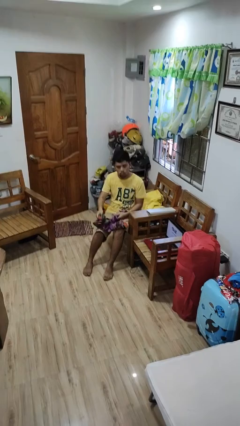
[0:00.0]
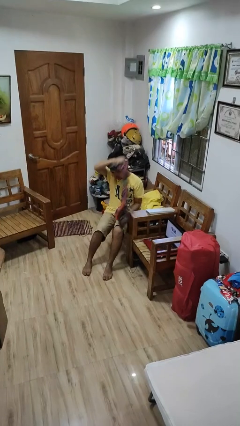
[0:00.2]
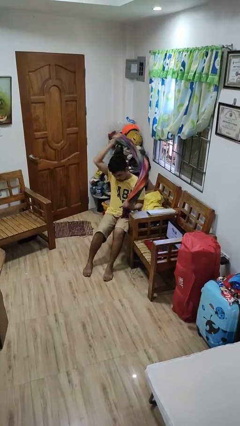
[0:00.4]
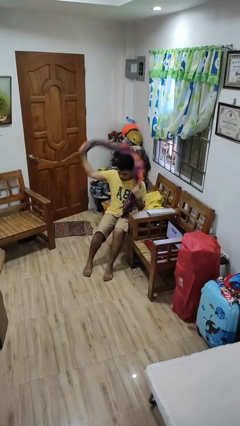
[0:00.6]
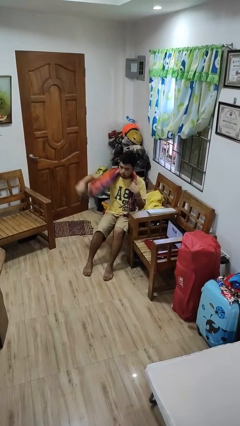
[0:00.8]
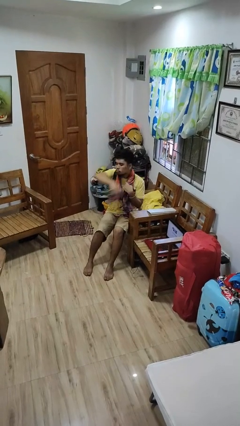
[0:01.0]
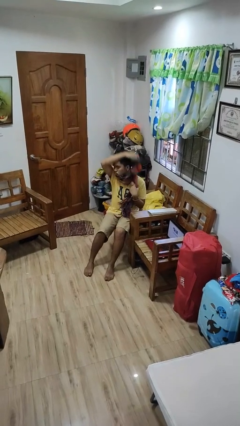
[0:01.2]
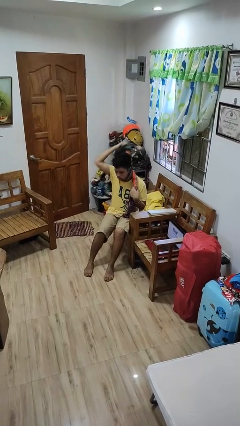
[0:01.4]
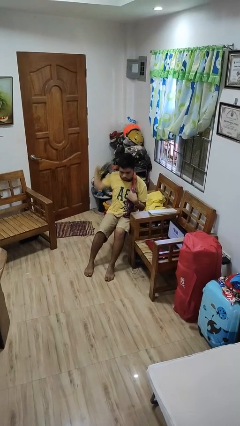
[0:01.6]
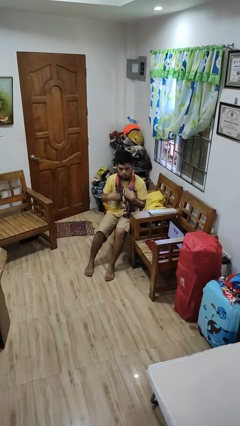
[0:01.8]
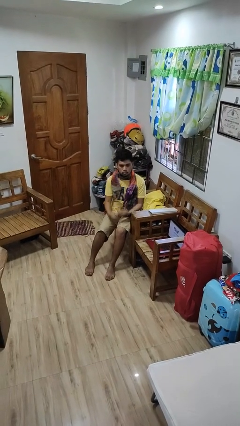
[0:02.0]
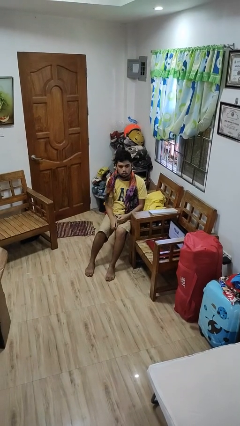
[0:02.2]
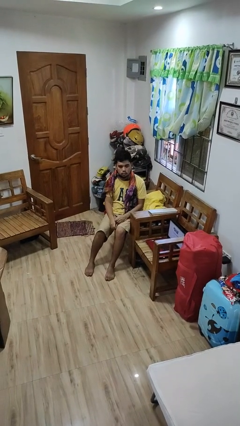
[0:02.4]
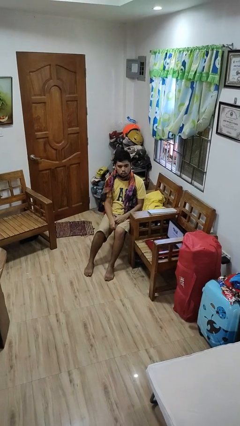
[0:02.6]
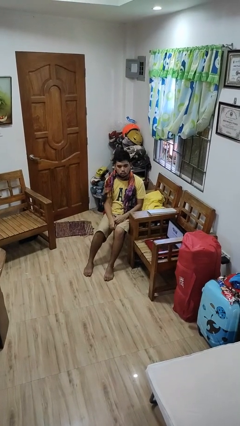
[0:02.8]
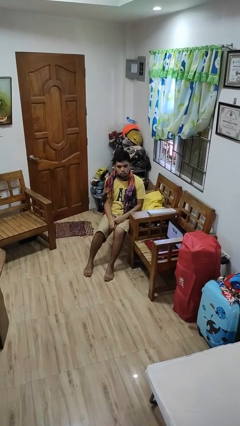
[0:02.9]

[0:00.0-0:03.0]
person puts on scarf

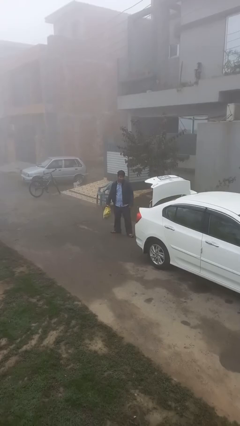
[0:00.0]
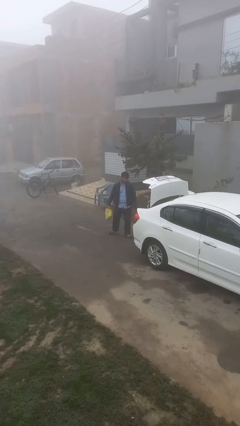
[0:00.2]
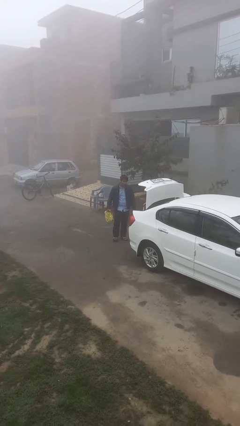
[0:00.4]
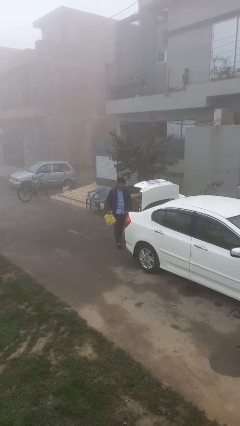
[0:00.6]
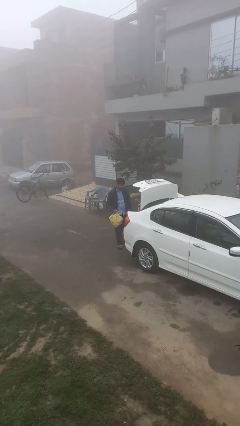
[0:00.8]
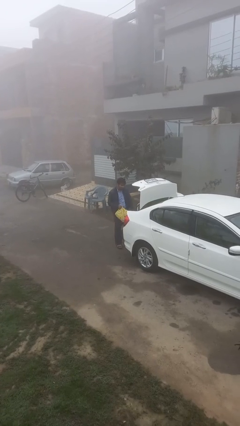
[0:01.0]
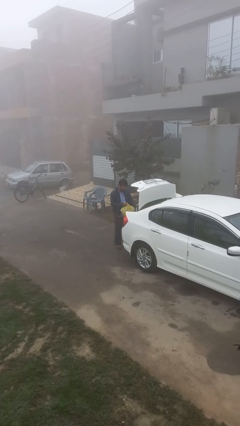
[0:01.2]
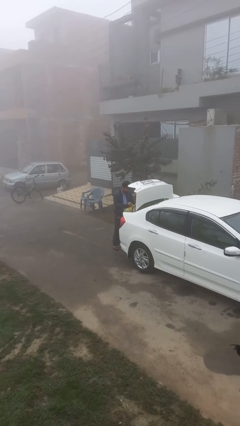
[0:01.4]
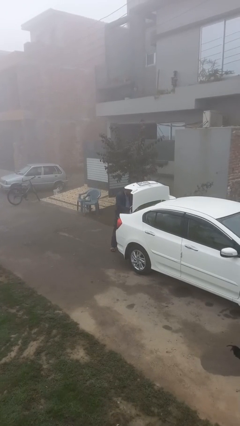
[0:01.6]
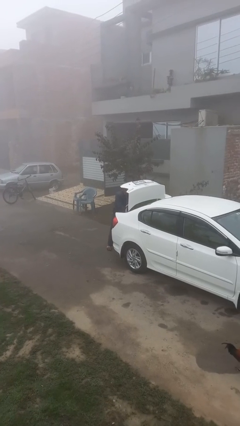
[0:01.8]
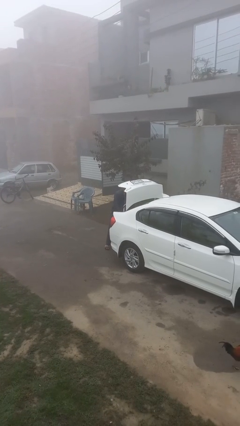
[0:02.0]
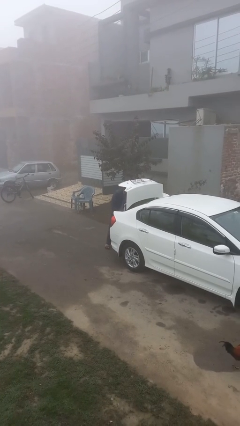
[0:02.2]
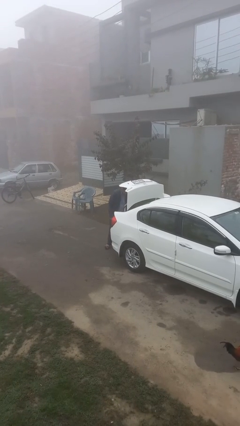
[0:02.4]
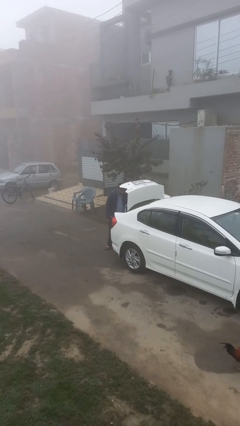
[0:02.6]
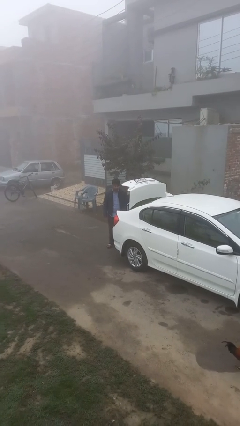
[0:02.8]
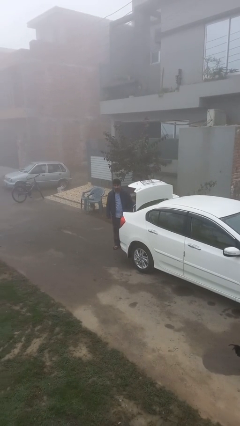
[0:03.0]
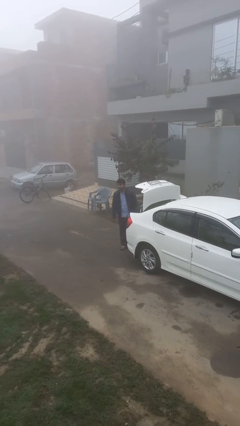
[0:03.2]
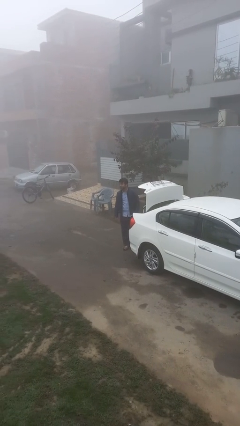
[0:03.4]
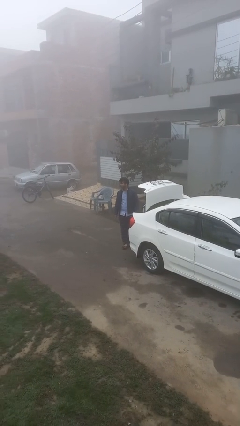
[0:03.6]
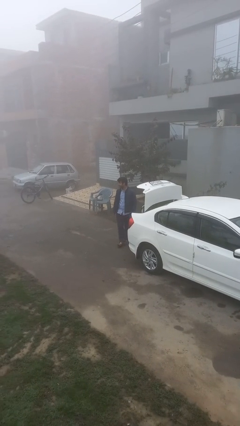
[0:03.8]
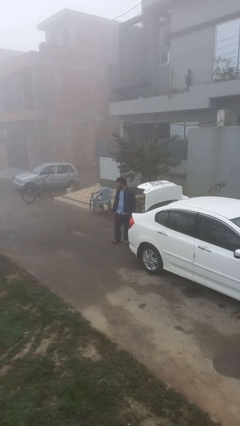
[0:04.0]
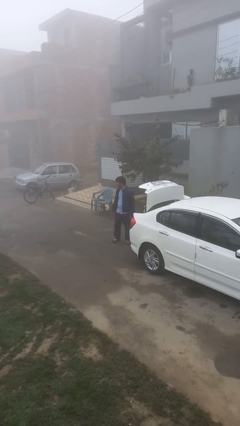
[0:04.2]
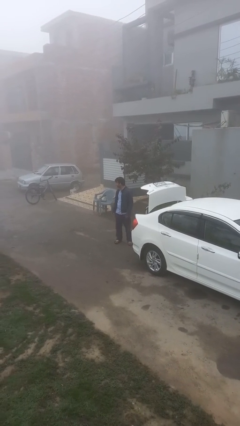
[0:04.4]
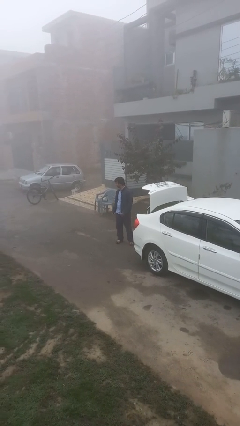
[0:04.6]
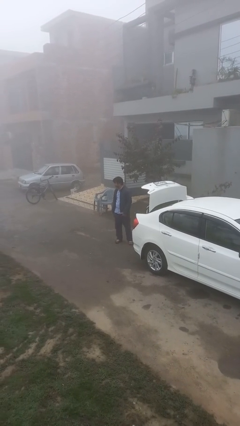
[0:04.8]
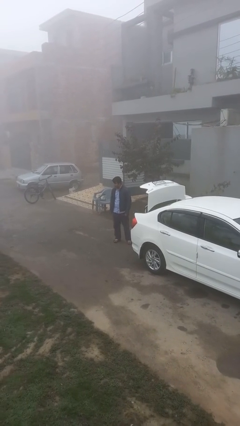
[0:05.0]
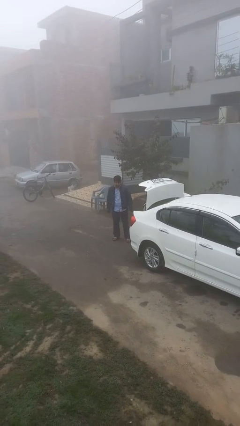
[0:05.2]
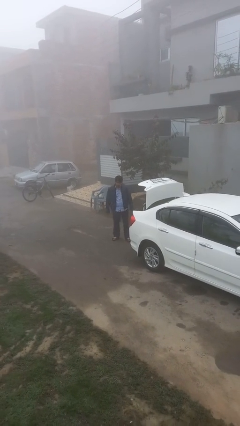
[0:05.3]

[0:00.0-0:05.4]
person loads car

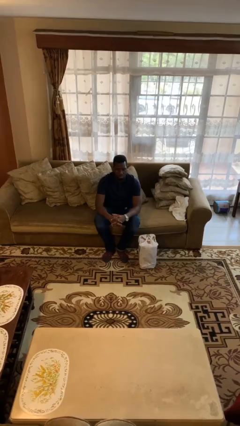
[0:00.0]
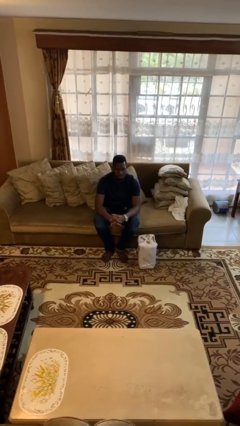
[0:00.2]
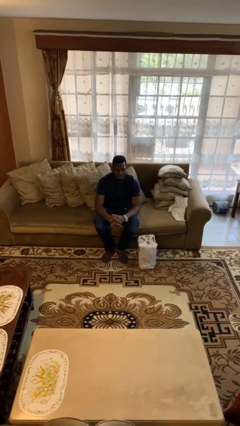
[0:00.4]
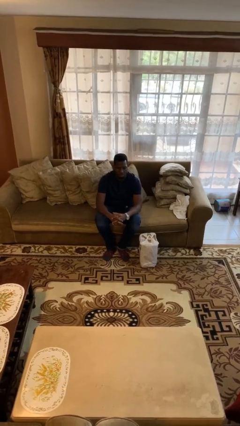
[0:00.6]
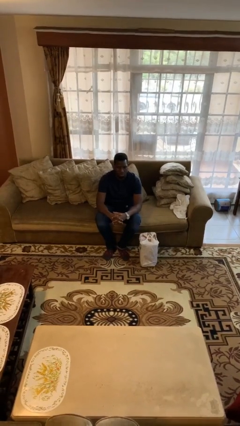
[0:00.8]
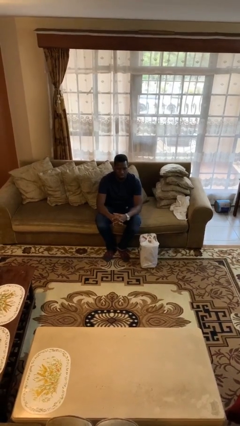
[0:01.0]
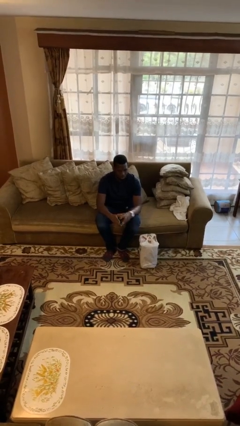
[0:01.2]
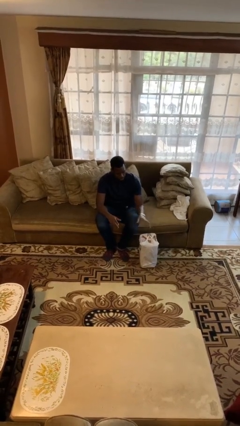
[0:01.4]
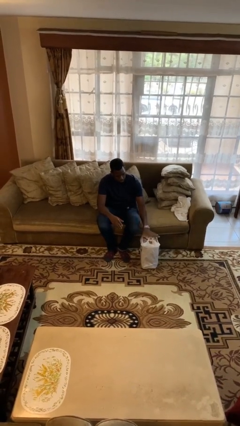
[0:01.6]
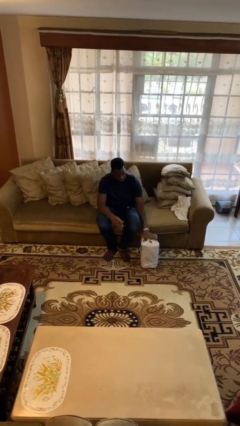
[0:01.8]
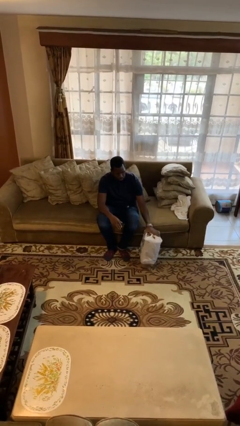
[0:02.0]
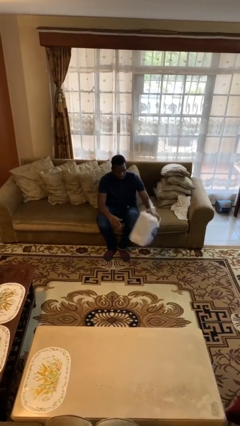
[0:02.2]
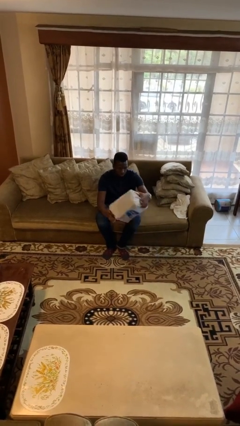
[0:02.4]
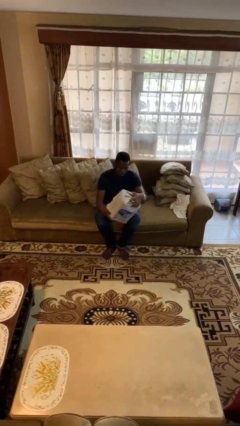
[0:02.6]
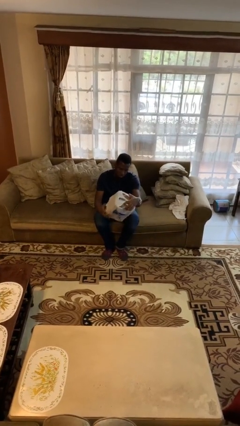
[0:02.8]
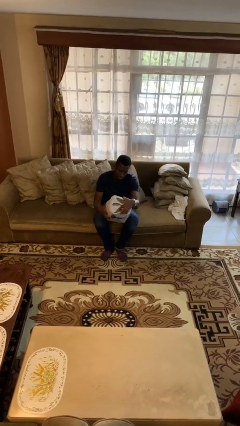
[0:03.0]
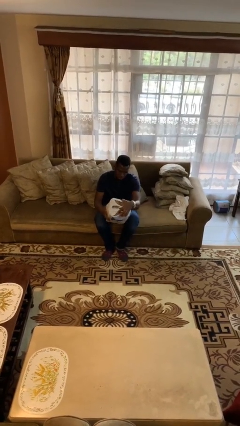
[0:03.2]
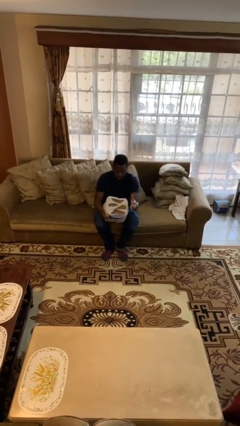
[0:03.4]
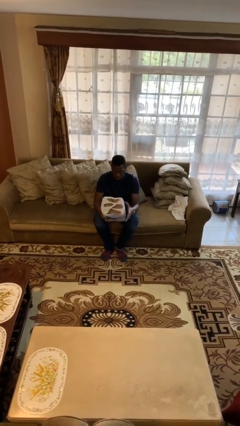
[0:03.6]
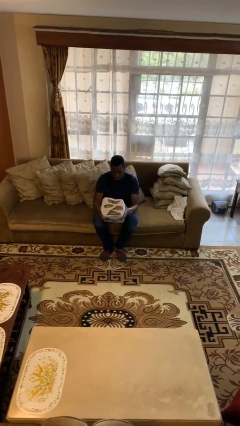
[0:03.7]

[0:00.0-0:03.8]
person picks up object from floor

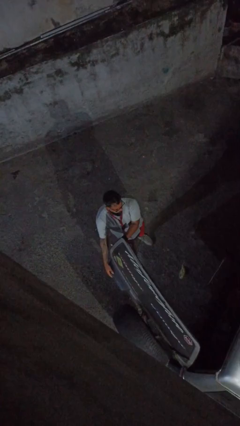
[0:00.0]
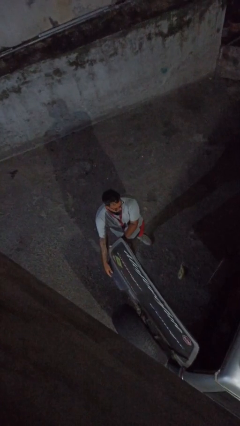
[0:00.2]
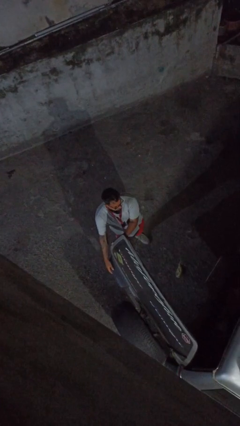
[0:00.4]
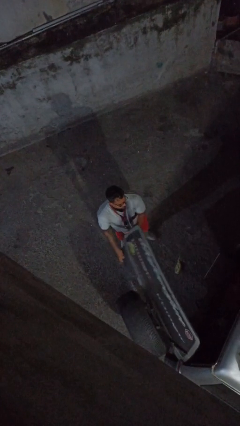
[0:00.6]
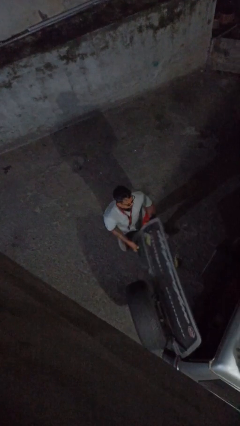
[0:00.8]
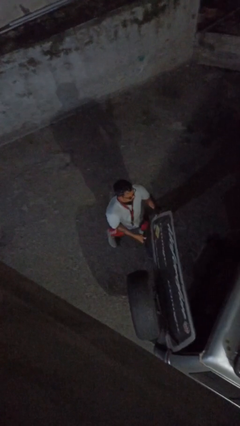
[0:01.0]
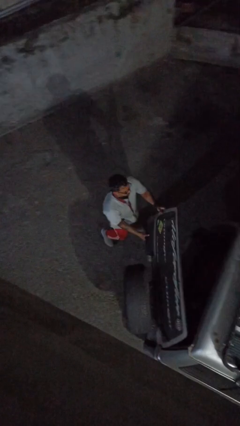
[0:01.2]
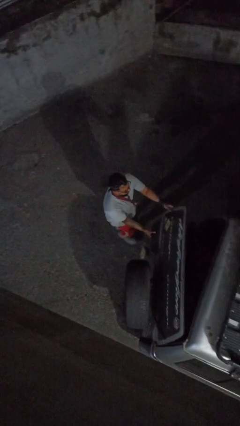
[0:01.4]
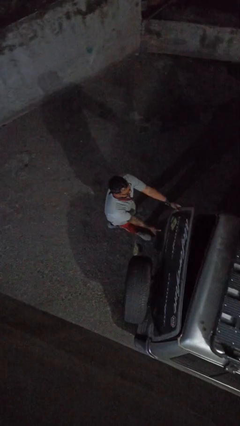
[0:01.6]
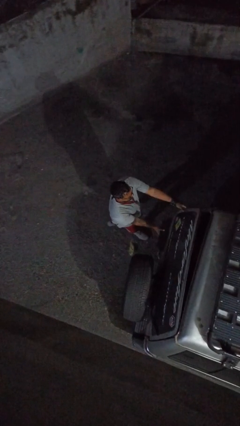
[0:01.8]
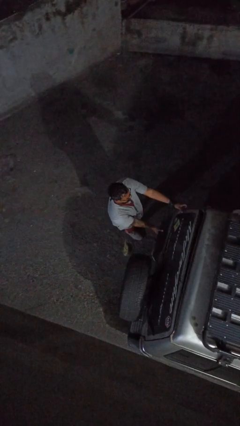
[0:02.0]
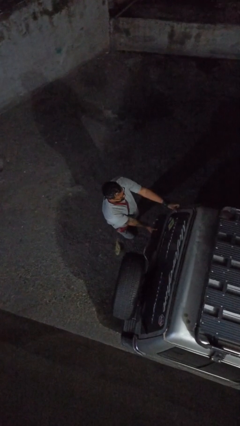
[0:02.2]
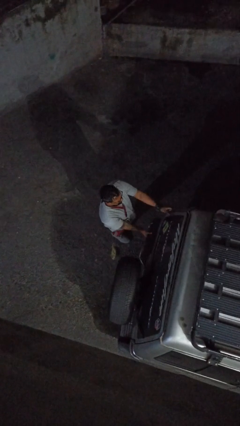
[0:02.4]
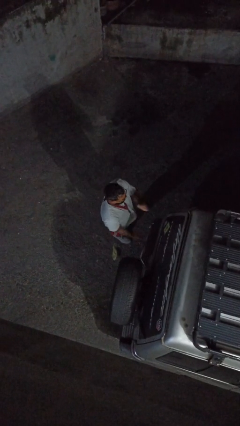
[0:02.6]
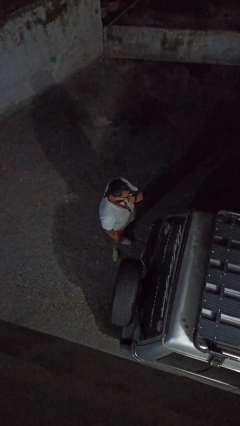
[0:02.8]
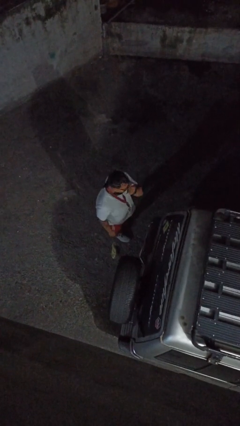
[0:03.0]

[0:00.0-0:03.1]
person closes car trunk

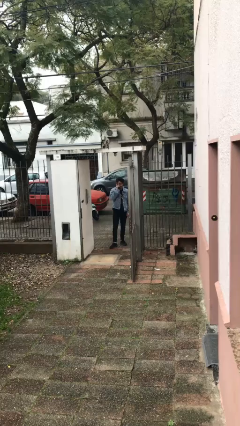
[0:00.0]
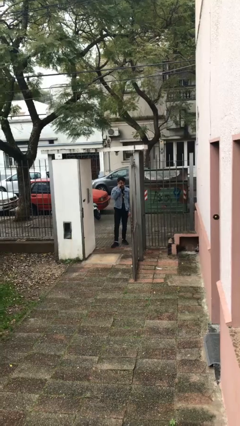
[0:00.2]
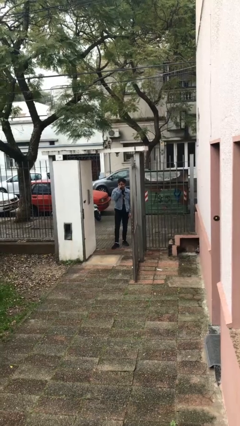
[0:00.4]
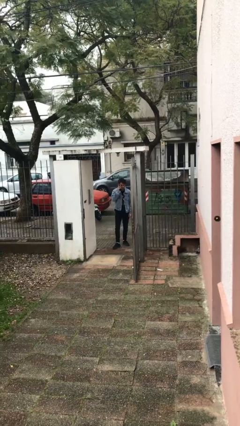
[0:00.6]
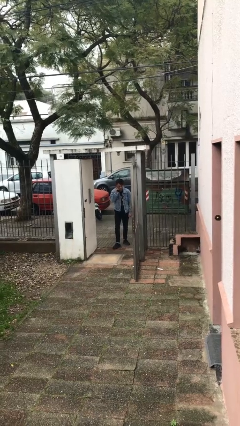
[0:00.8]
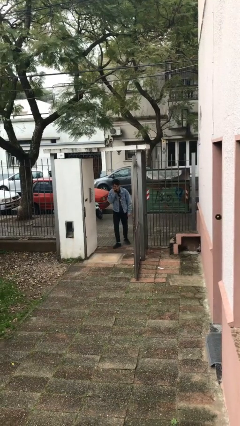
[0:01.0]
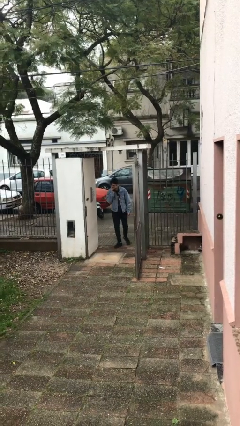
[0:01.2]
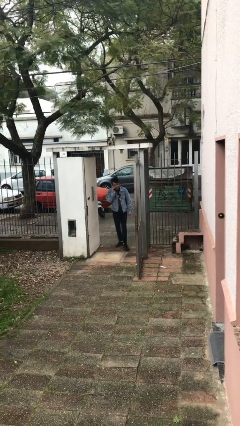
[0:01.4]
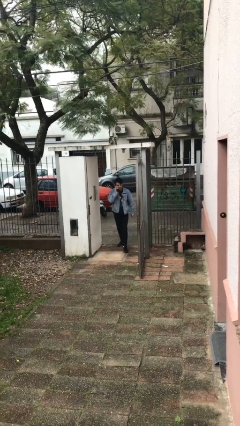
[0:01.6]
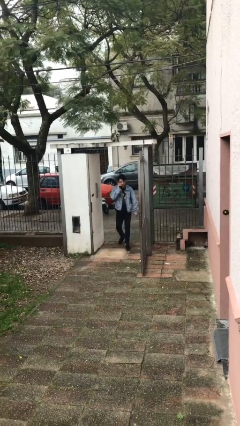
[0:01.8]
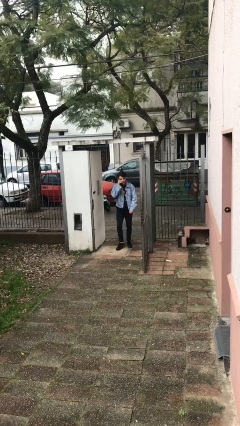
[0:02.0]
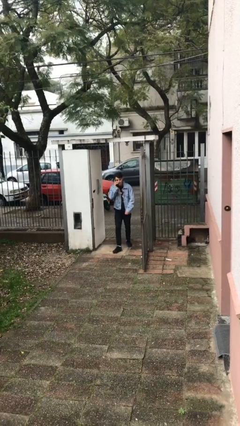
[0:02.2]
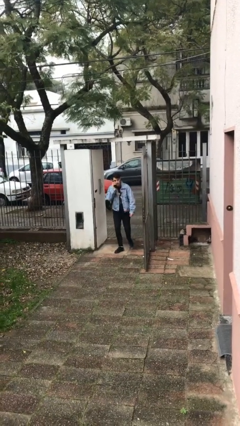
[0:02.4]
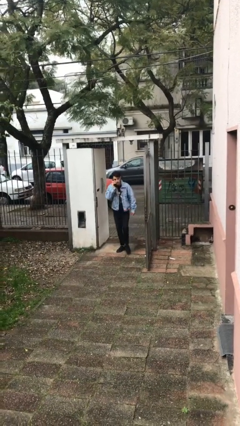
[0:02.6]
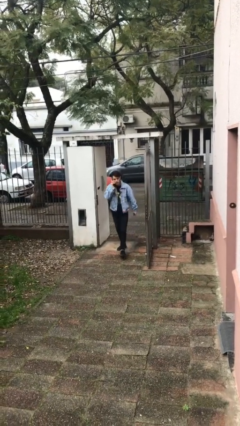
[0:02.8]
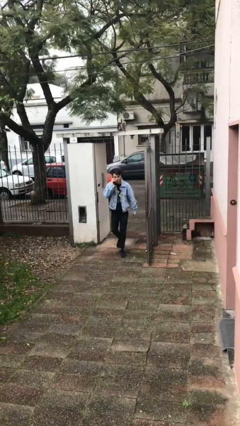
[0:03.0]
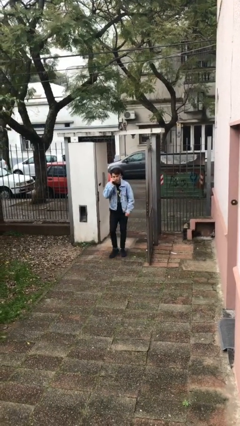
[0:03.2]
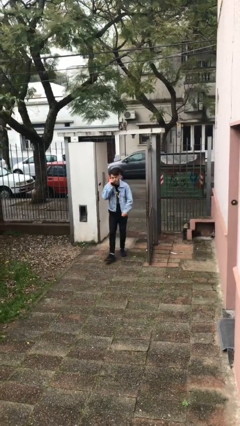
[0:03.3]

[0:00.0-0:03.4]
person enters scene through structure
